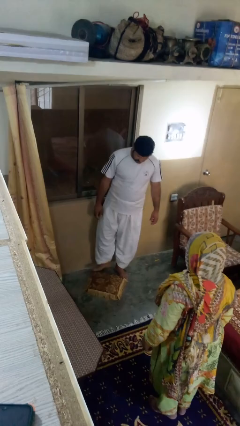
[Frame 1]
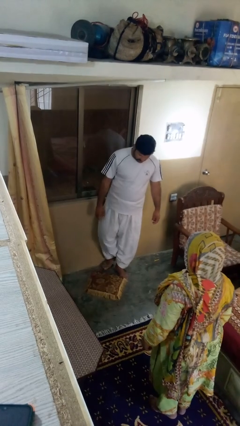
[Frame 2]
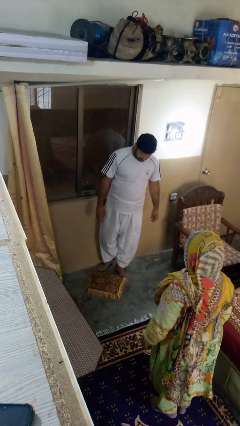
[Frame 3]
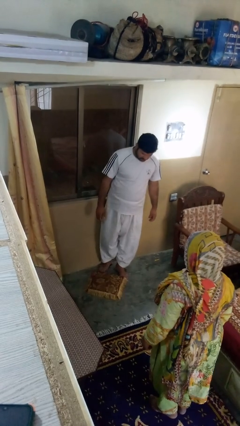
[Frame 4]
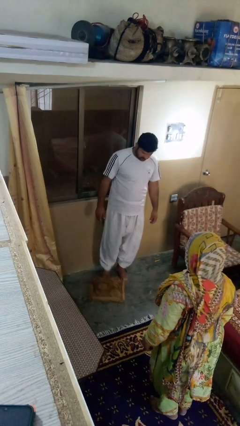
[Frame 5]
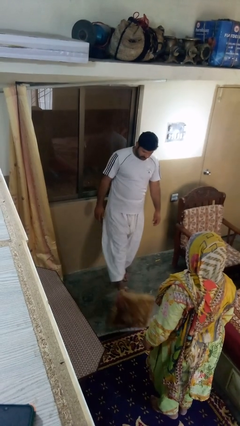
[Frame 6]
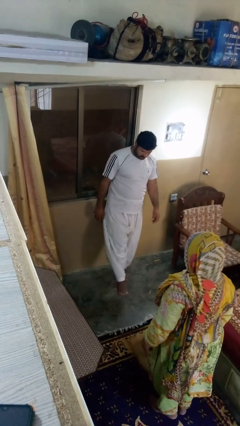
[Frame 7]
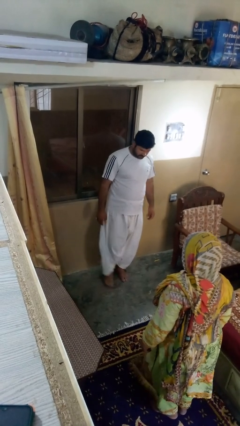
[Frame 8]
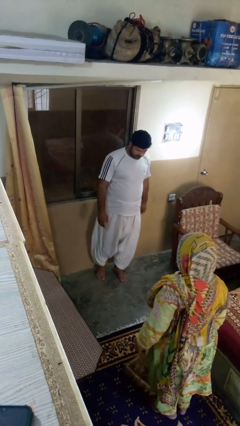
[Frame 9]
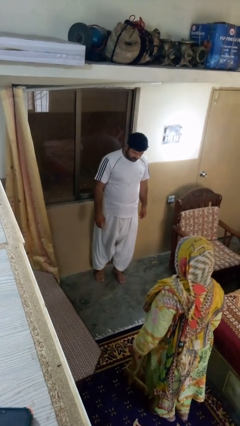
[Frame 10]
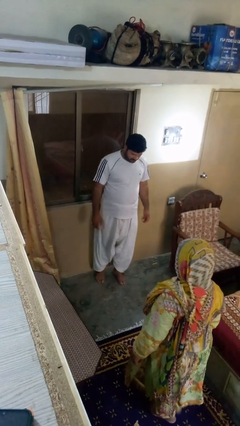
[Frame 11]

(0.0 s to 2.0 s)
person kicks object to person

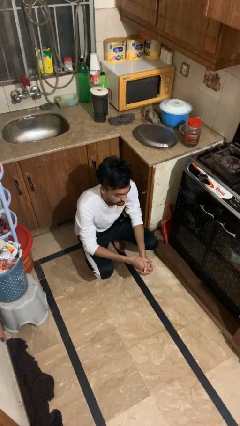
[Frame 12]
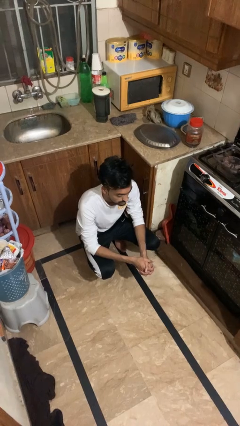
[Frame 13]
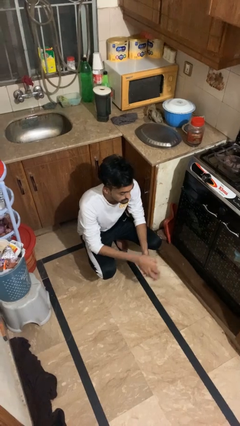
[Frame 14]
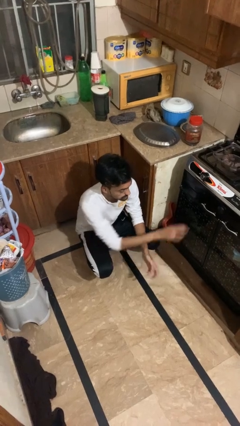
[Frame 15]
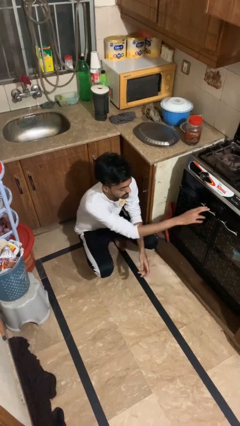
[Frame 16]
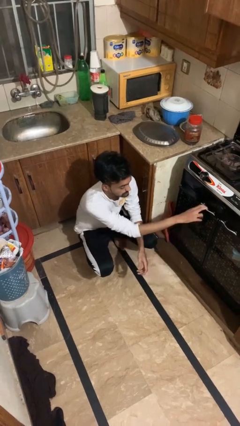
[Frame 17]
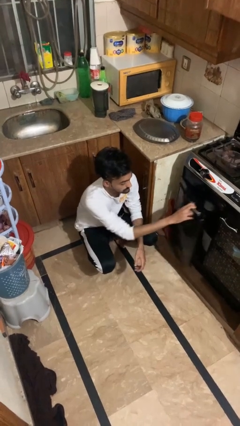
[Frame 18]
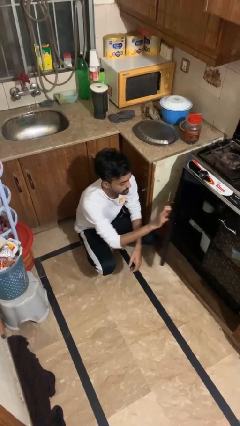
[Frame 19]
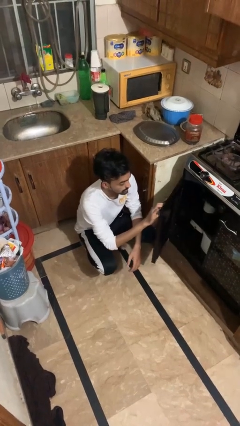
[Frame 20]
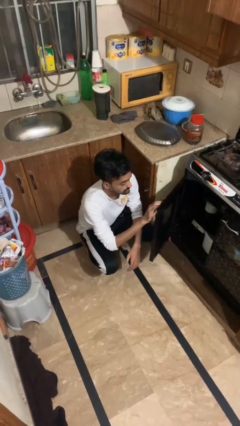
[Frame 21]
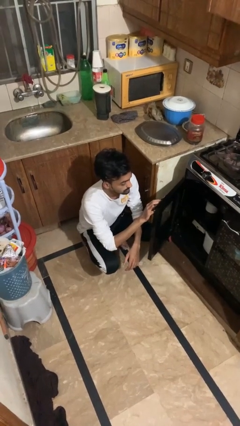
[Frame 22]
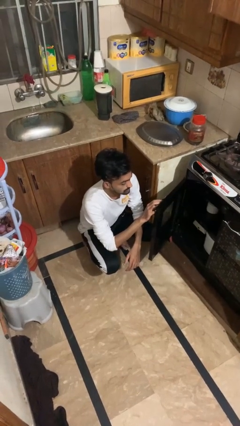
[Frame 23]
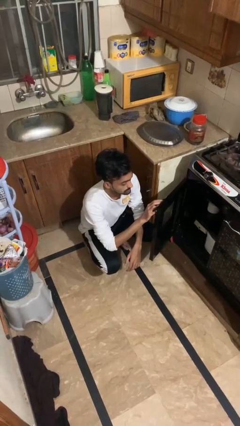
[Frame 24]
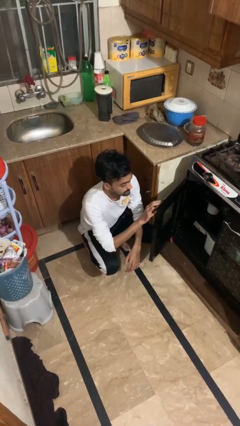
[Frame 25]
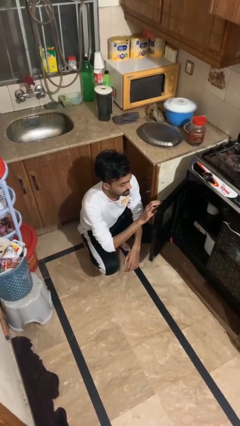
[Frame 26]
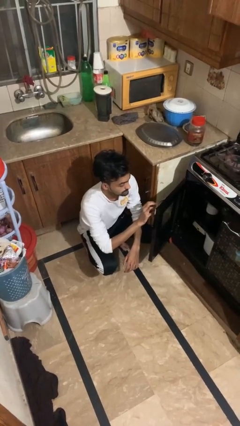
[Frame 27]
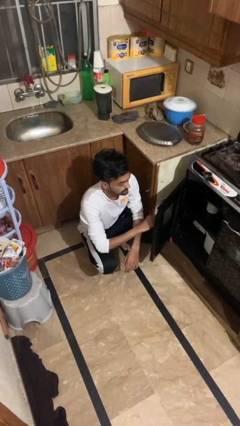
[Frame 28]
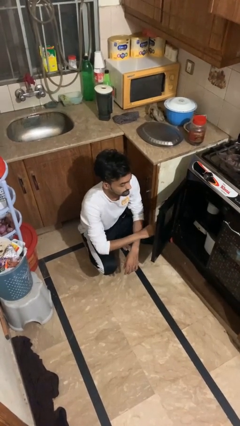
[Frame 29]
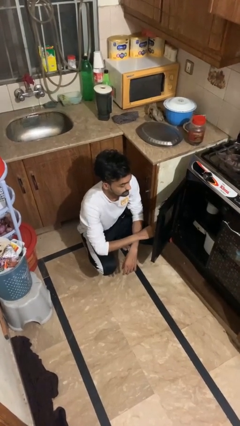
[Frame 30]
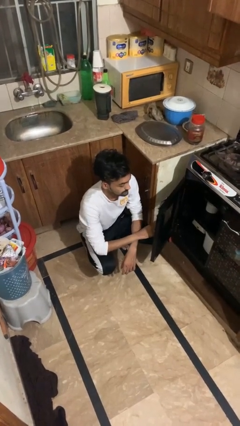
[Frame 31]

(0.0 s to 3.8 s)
person opens oven door

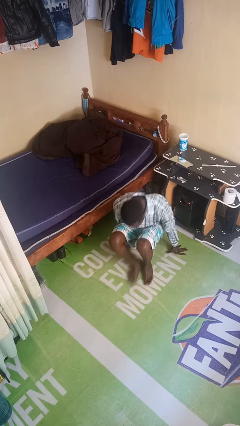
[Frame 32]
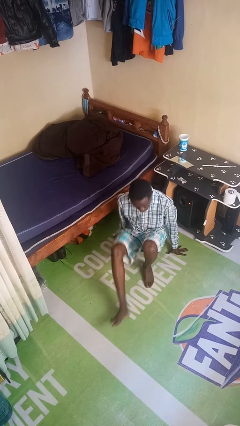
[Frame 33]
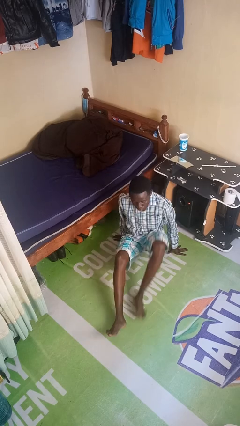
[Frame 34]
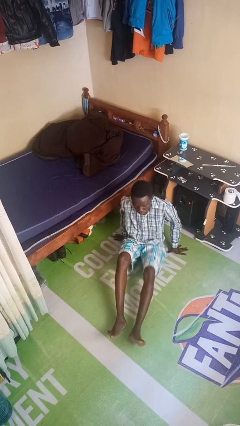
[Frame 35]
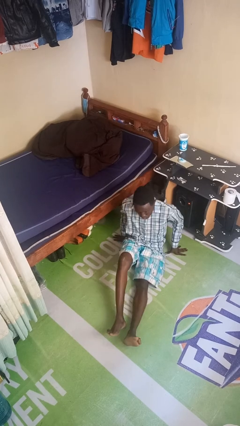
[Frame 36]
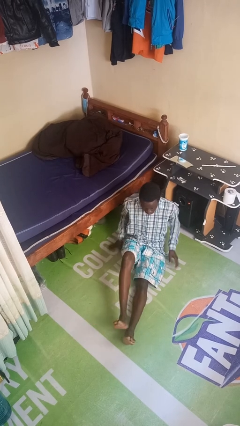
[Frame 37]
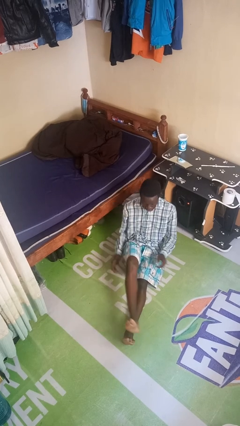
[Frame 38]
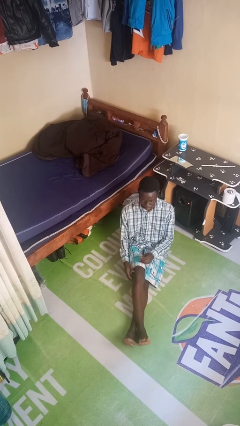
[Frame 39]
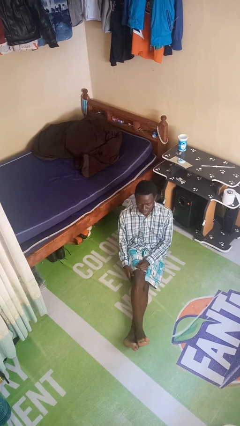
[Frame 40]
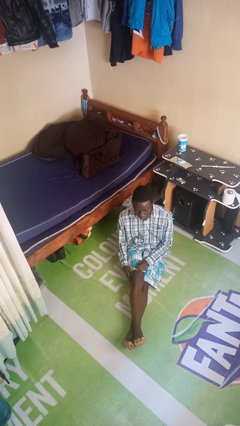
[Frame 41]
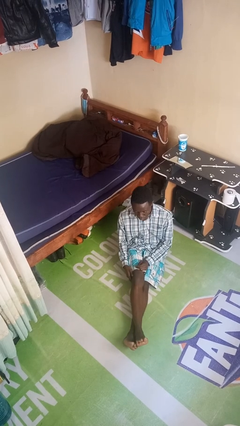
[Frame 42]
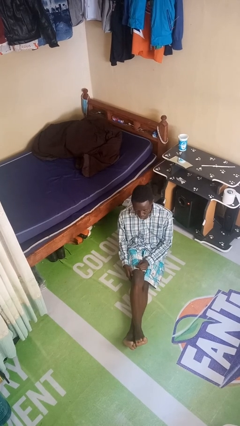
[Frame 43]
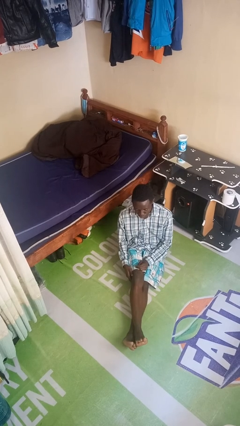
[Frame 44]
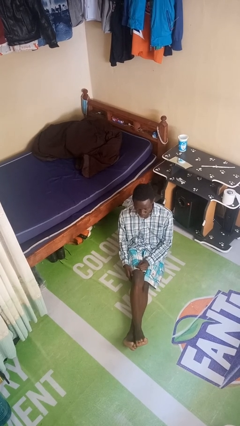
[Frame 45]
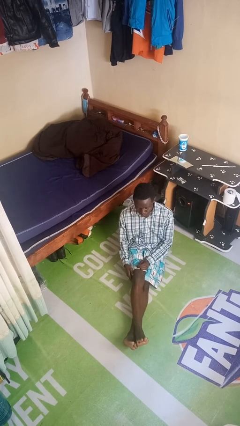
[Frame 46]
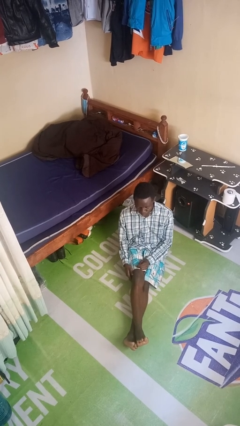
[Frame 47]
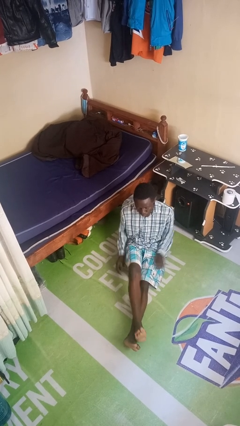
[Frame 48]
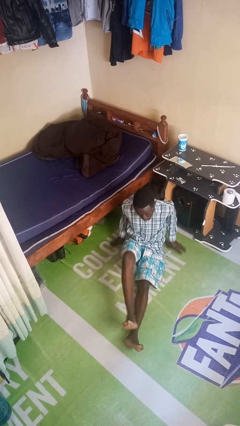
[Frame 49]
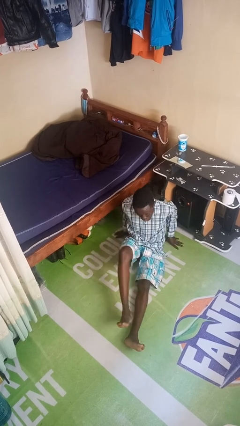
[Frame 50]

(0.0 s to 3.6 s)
person sits crisscross

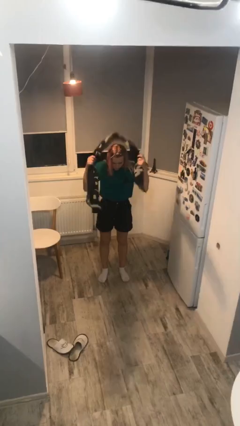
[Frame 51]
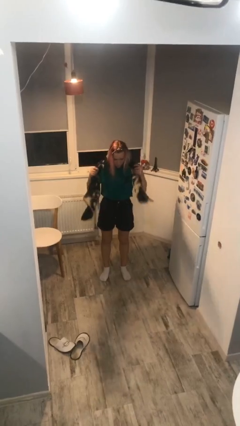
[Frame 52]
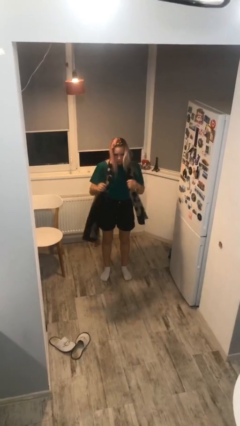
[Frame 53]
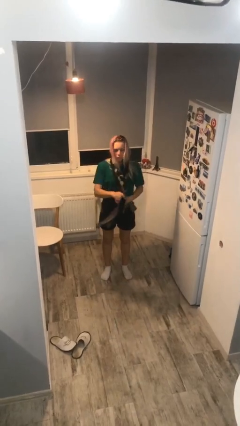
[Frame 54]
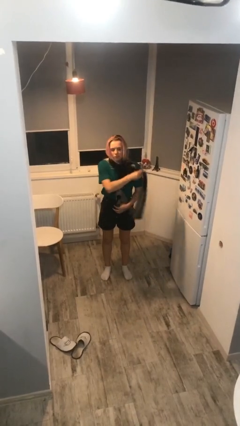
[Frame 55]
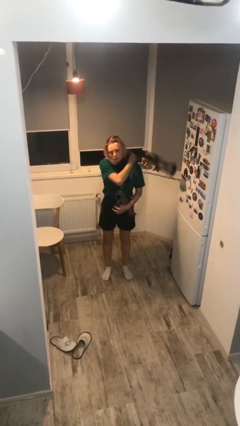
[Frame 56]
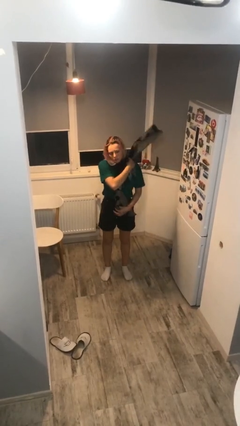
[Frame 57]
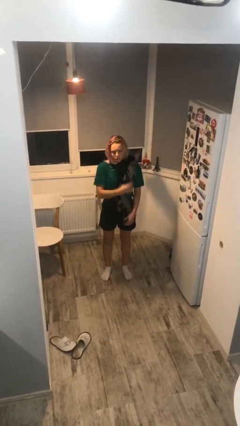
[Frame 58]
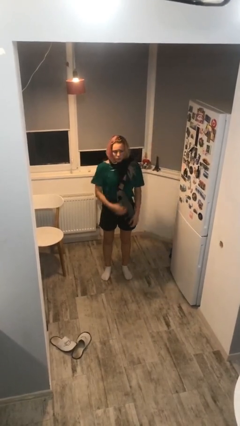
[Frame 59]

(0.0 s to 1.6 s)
person puts on scarf

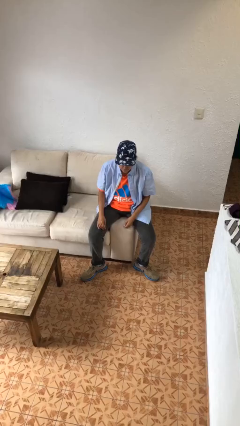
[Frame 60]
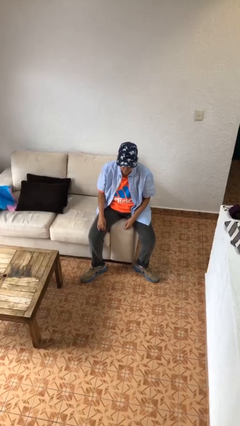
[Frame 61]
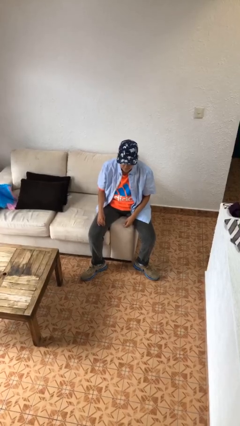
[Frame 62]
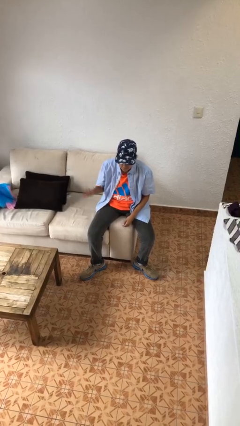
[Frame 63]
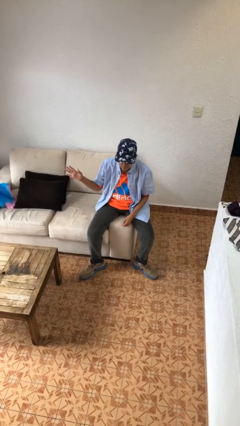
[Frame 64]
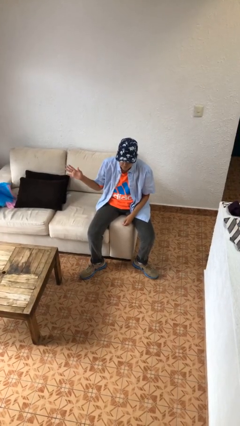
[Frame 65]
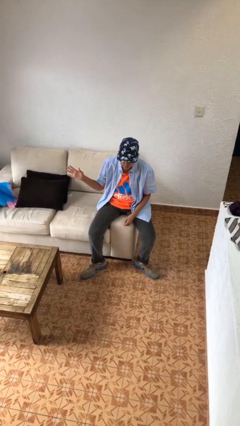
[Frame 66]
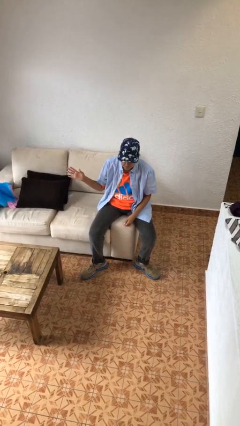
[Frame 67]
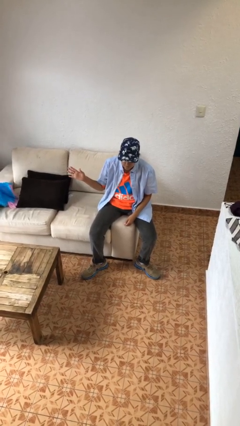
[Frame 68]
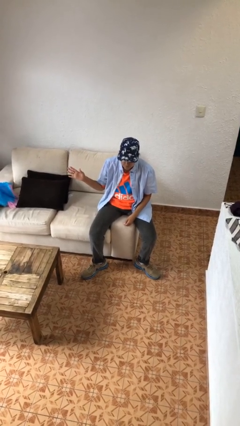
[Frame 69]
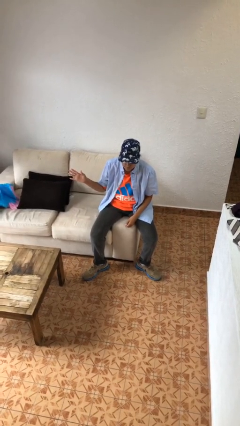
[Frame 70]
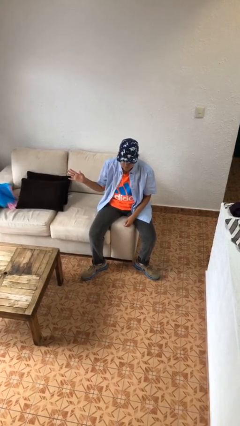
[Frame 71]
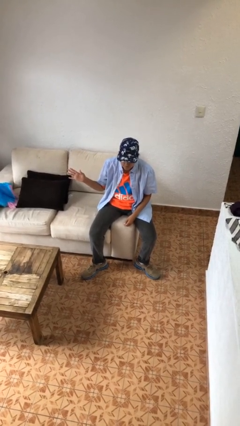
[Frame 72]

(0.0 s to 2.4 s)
person gestures number five

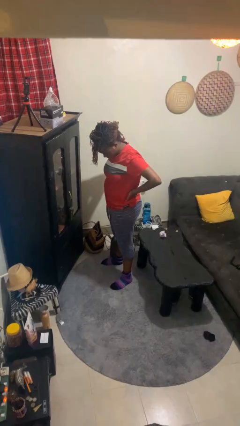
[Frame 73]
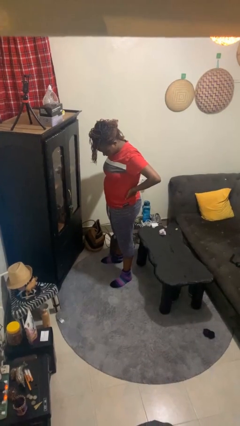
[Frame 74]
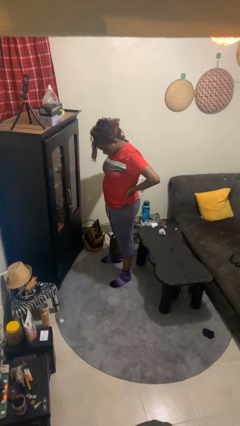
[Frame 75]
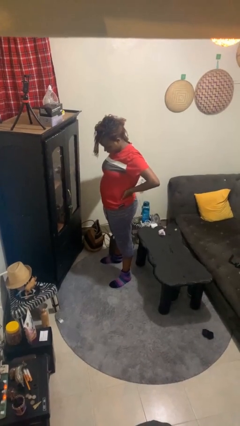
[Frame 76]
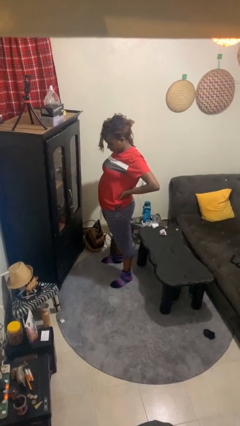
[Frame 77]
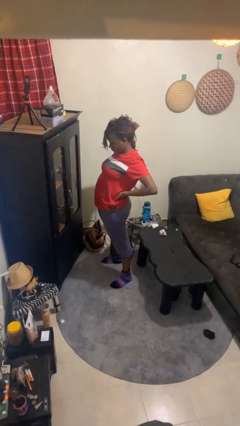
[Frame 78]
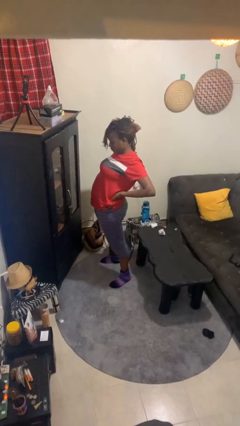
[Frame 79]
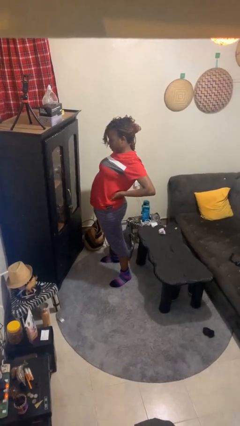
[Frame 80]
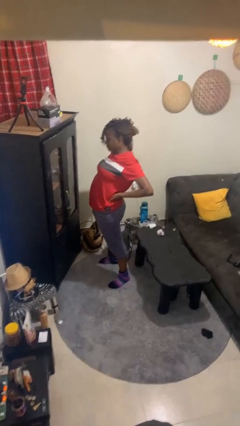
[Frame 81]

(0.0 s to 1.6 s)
person stretches back

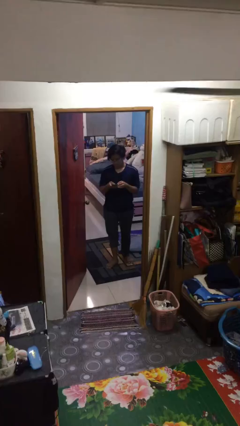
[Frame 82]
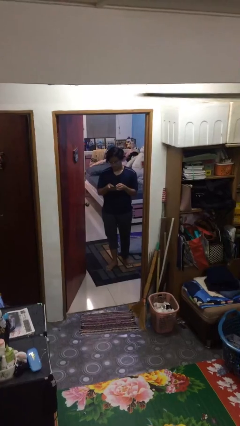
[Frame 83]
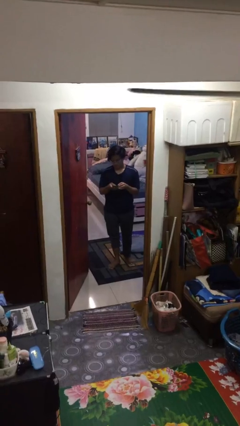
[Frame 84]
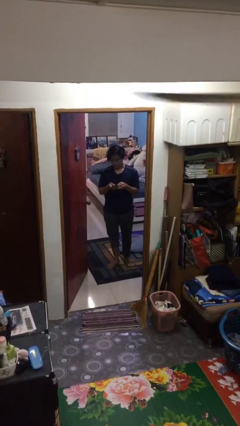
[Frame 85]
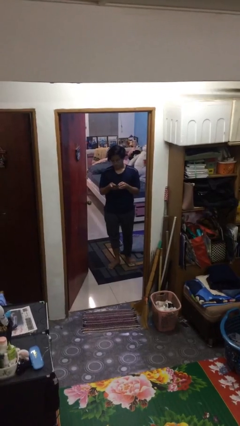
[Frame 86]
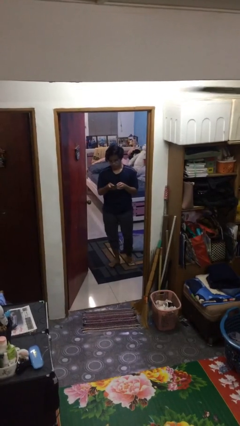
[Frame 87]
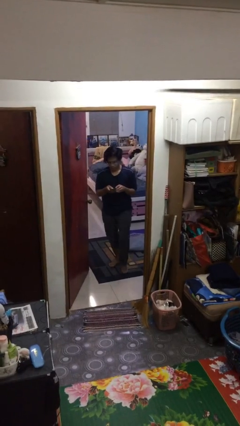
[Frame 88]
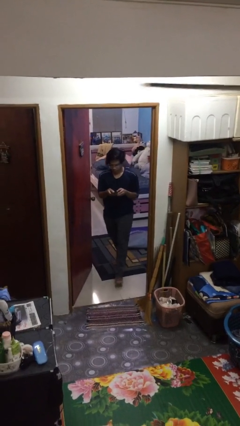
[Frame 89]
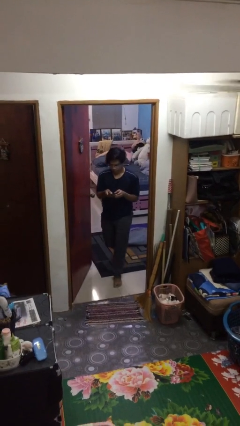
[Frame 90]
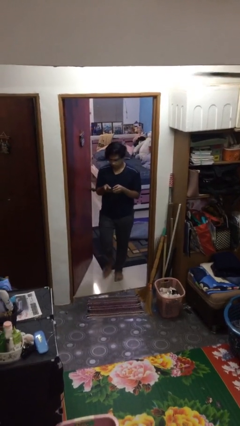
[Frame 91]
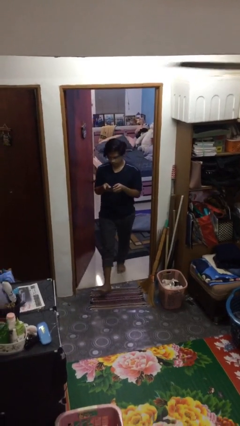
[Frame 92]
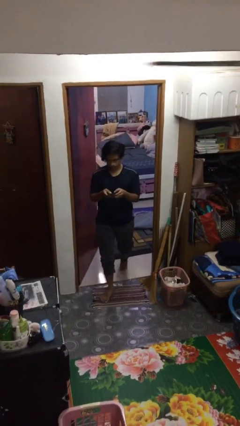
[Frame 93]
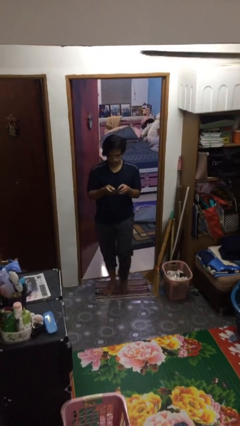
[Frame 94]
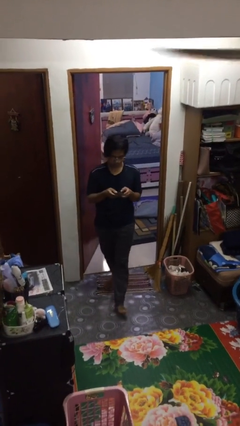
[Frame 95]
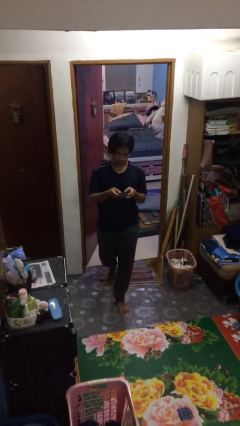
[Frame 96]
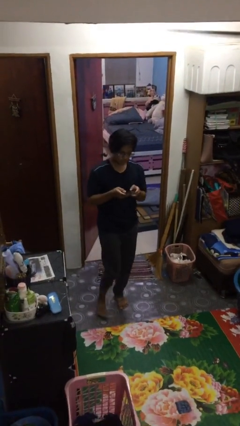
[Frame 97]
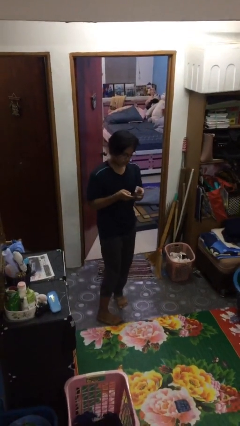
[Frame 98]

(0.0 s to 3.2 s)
person enters scene through structure
